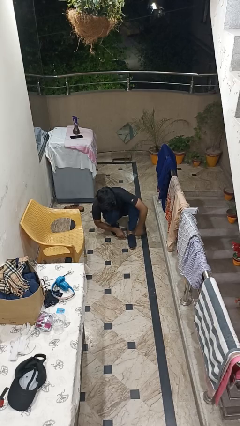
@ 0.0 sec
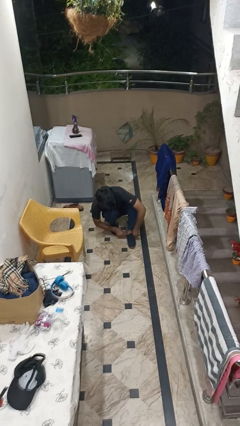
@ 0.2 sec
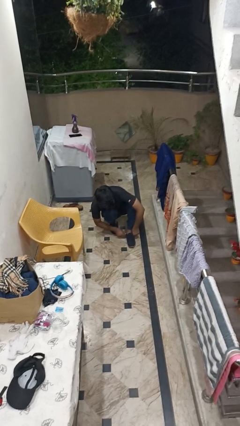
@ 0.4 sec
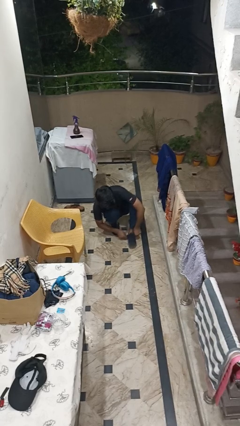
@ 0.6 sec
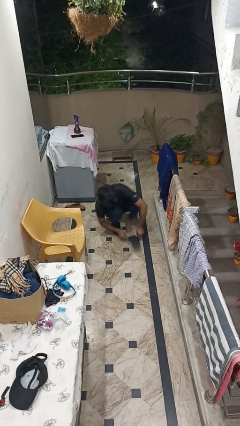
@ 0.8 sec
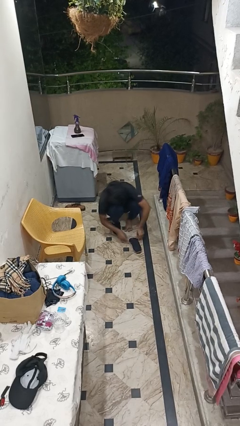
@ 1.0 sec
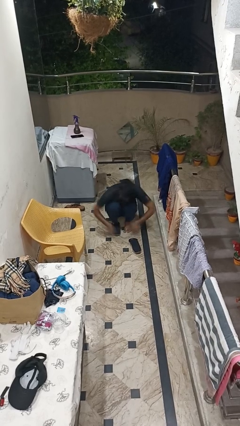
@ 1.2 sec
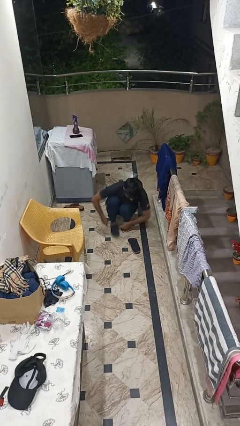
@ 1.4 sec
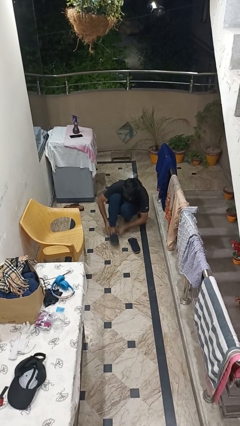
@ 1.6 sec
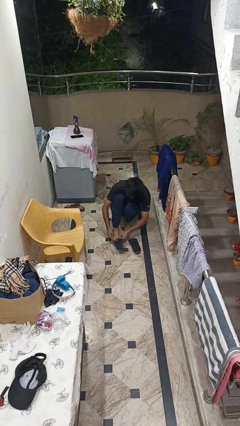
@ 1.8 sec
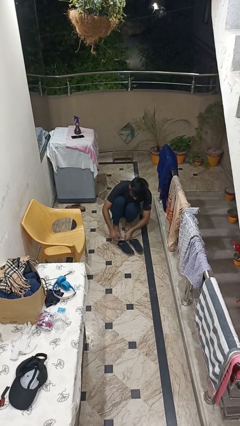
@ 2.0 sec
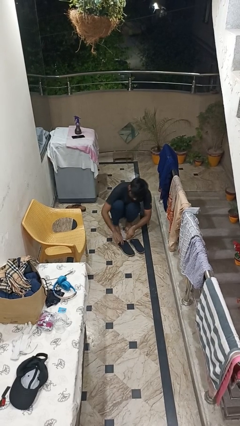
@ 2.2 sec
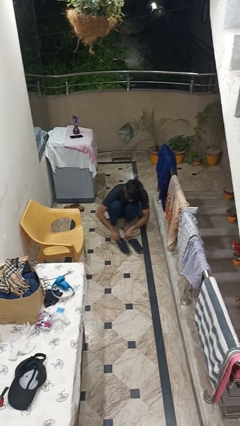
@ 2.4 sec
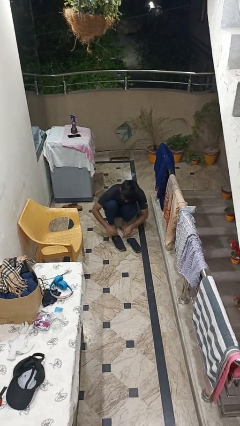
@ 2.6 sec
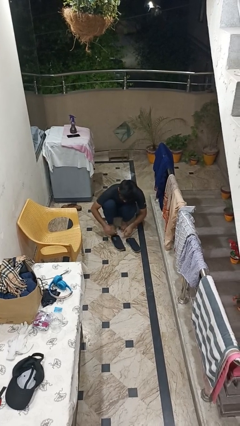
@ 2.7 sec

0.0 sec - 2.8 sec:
person takes off shoes

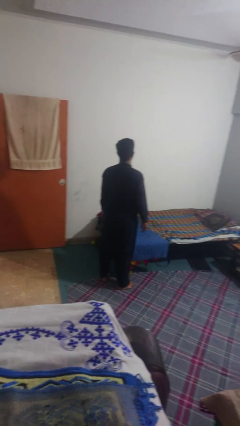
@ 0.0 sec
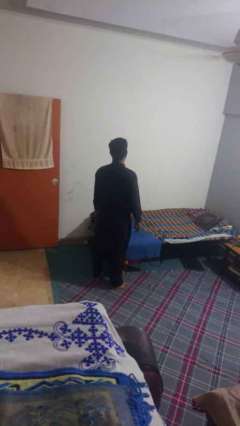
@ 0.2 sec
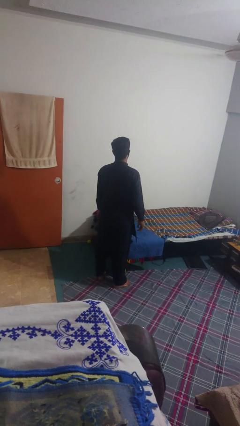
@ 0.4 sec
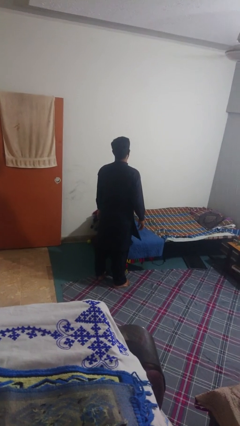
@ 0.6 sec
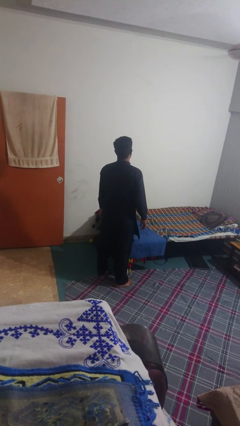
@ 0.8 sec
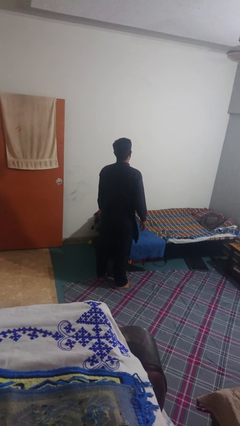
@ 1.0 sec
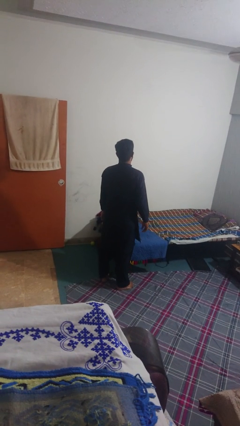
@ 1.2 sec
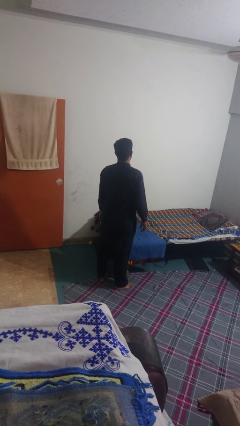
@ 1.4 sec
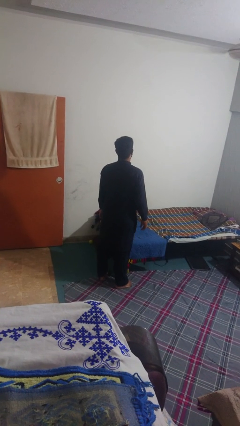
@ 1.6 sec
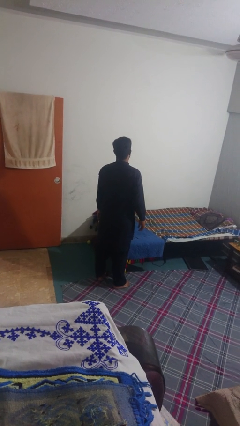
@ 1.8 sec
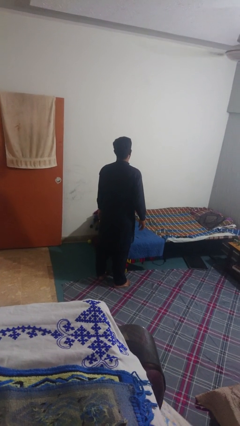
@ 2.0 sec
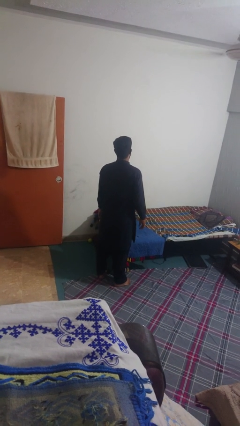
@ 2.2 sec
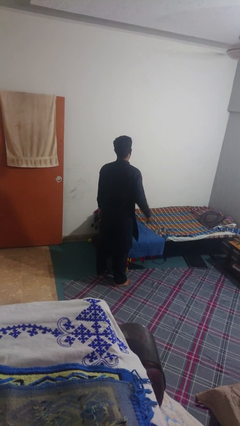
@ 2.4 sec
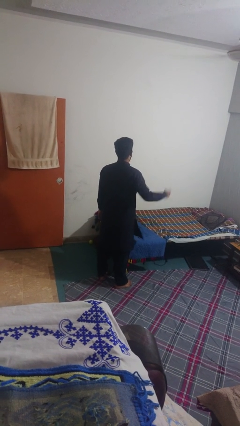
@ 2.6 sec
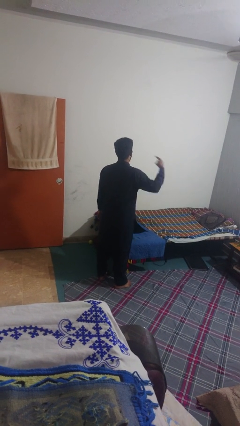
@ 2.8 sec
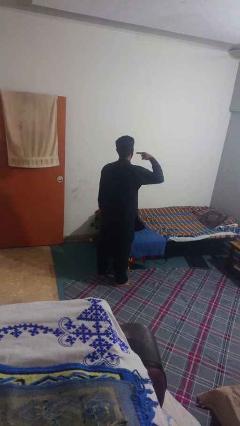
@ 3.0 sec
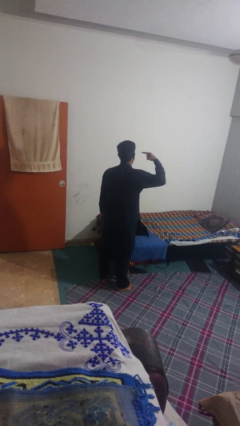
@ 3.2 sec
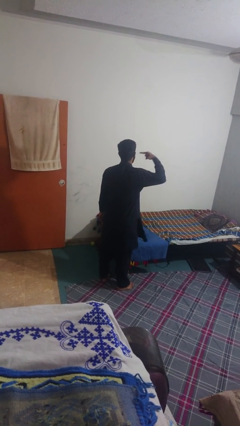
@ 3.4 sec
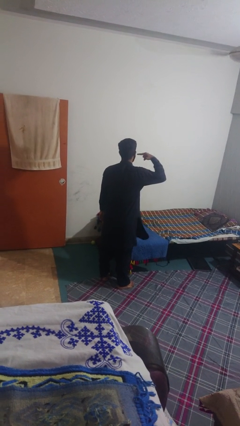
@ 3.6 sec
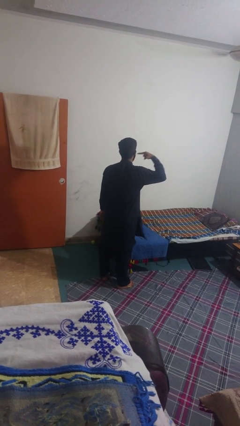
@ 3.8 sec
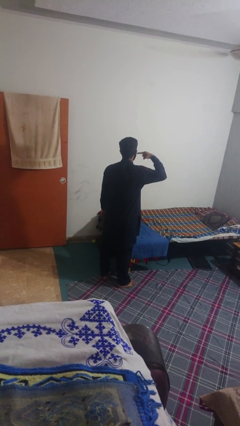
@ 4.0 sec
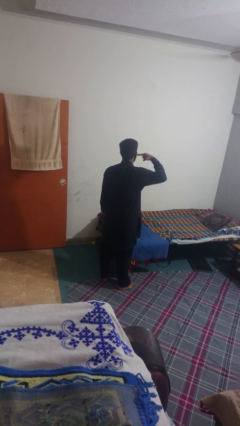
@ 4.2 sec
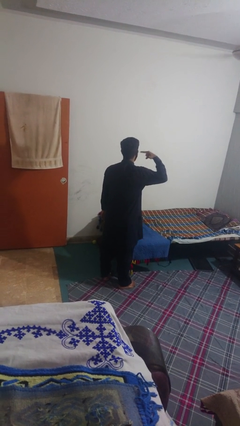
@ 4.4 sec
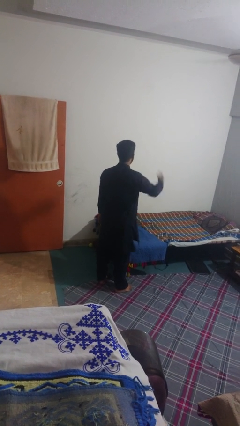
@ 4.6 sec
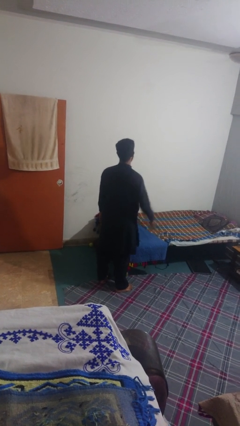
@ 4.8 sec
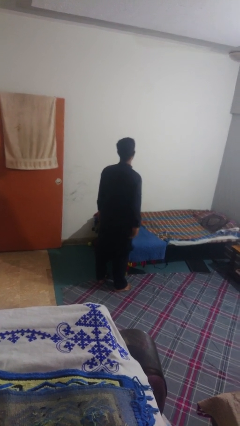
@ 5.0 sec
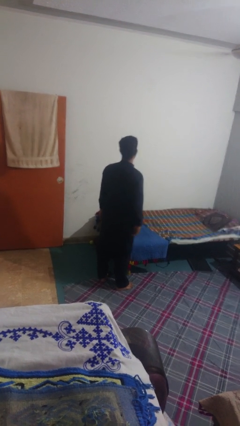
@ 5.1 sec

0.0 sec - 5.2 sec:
person gestures listen closely

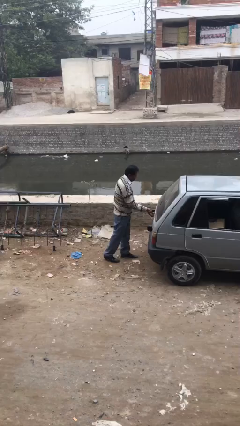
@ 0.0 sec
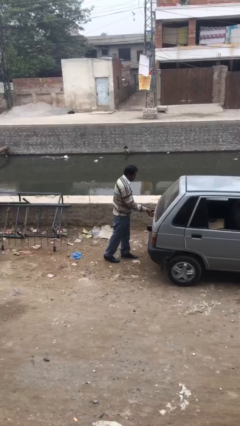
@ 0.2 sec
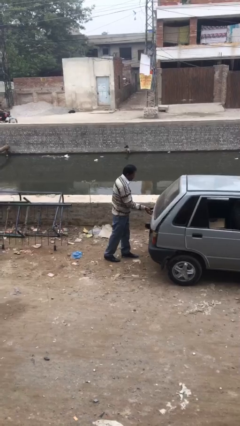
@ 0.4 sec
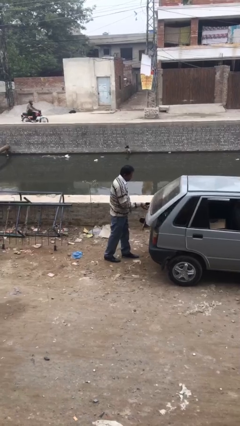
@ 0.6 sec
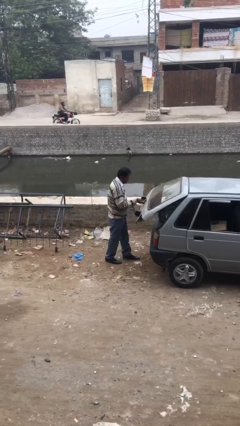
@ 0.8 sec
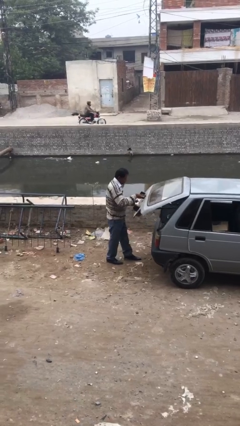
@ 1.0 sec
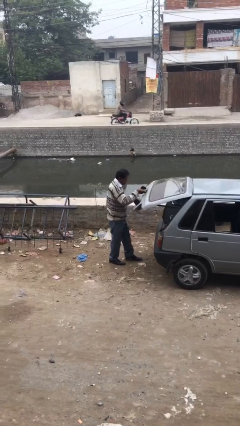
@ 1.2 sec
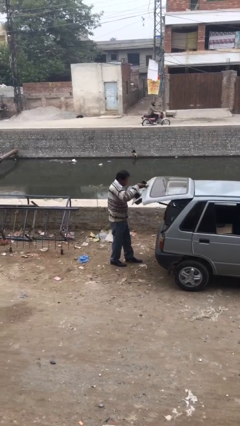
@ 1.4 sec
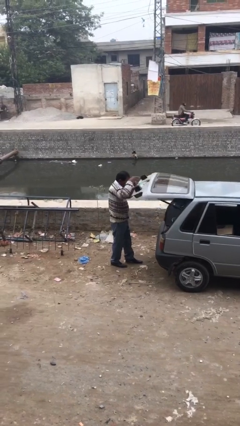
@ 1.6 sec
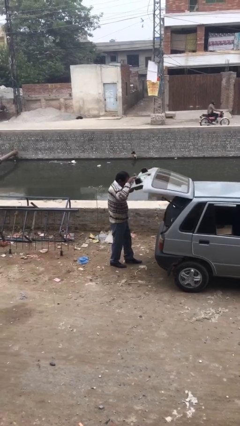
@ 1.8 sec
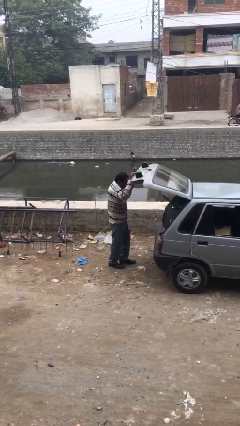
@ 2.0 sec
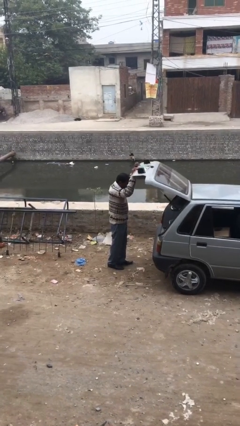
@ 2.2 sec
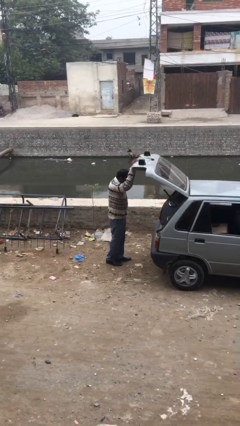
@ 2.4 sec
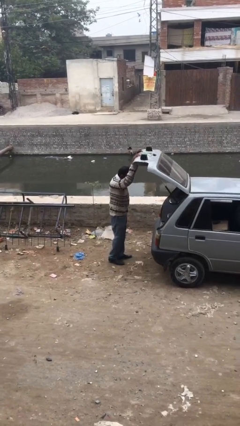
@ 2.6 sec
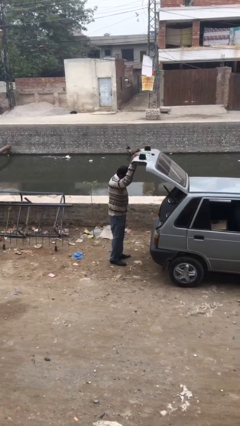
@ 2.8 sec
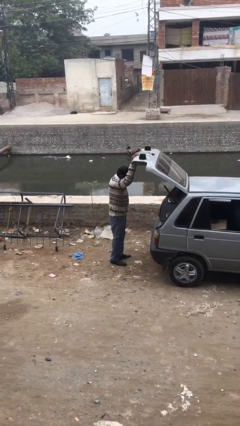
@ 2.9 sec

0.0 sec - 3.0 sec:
person opens car trunk

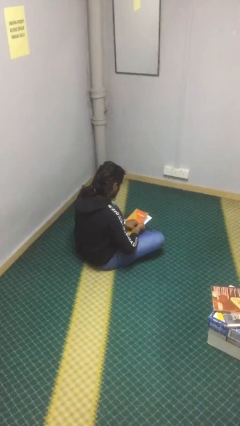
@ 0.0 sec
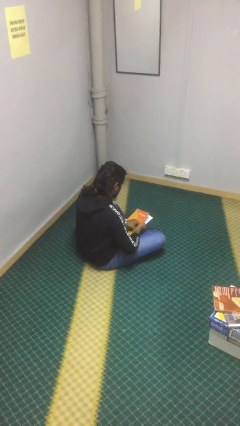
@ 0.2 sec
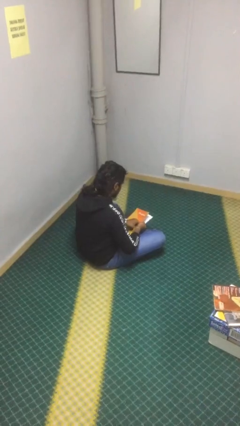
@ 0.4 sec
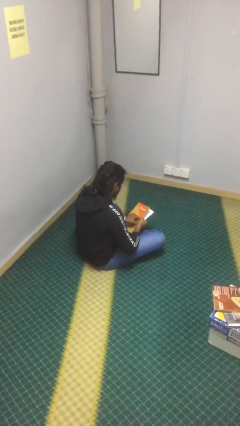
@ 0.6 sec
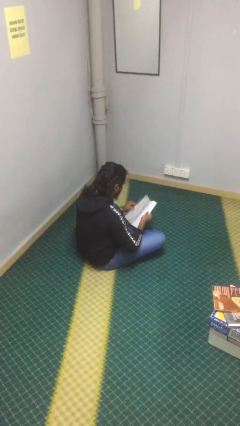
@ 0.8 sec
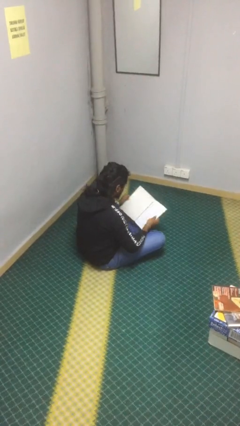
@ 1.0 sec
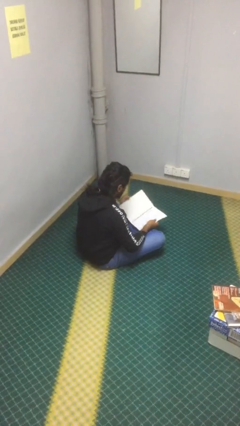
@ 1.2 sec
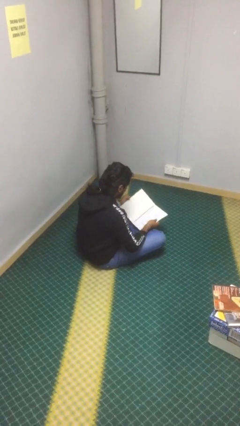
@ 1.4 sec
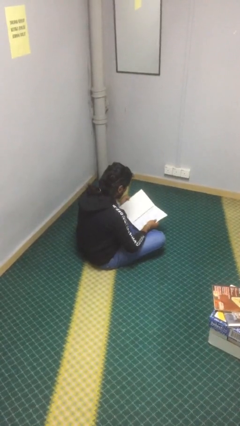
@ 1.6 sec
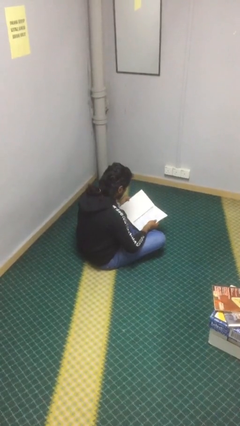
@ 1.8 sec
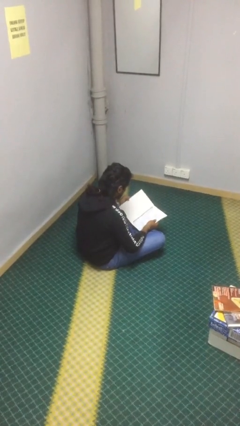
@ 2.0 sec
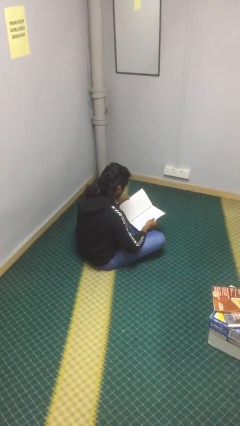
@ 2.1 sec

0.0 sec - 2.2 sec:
person reads book

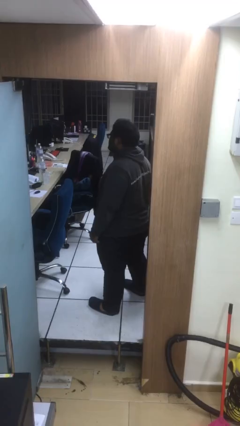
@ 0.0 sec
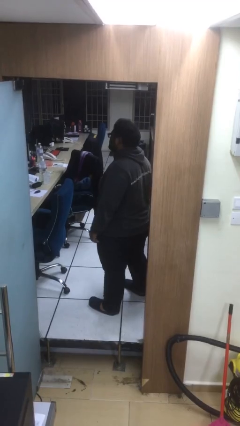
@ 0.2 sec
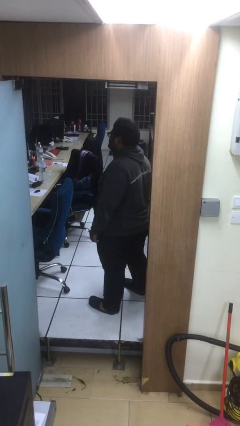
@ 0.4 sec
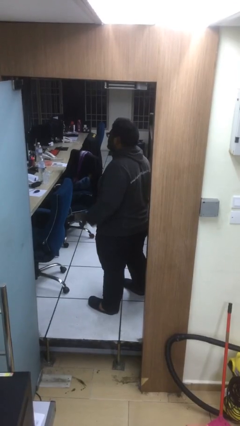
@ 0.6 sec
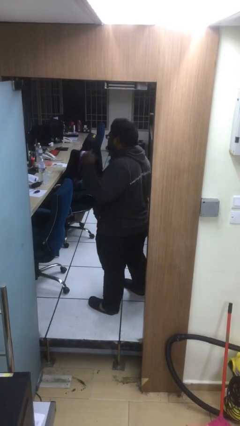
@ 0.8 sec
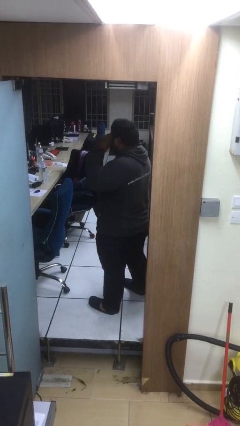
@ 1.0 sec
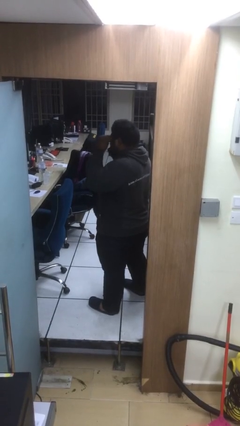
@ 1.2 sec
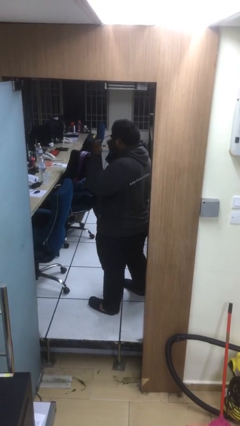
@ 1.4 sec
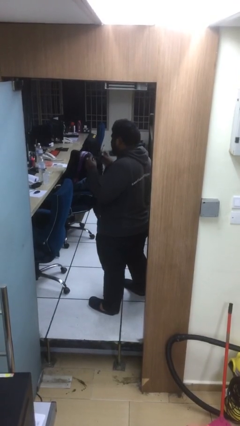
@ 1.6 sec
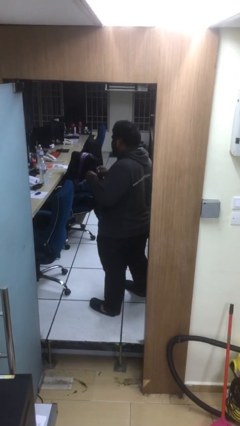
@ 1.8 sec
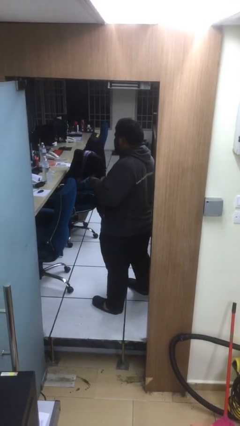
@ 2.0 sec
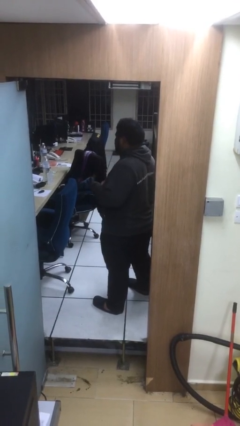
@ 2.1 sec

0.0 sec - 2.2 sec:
person takes off glasses

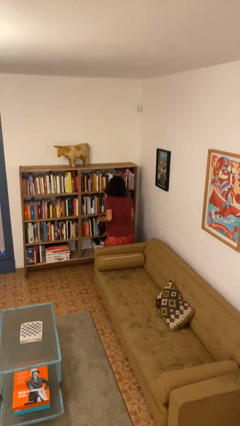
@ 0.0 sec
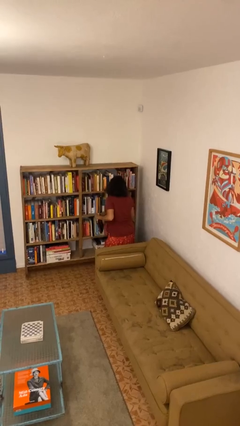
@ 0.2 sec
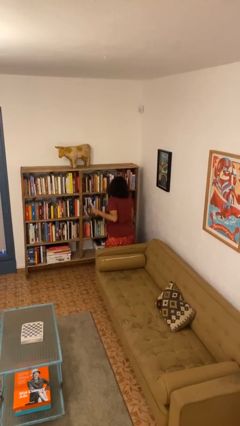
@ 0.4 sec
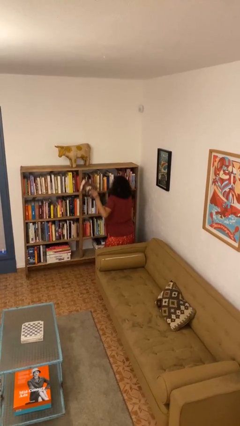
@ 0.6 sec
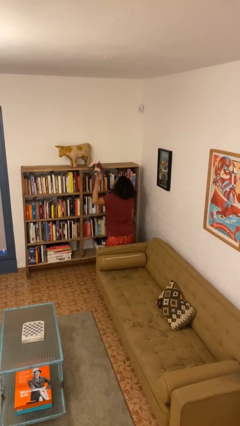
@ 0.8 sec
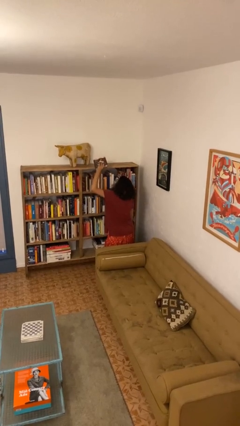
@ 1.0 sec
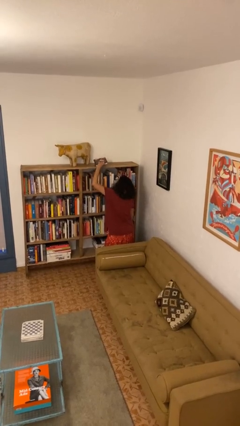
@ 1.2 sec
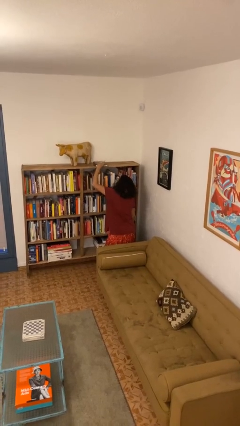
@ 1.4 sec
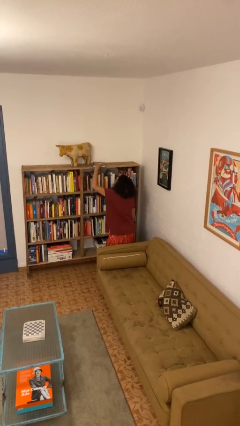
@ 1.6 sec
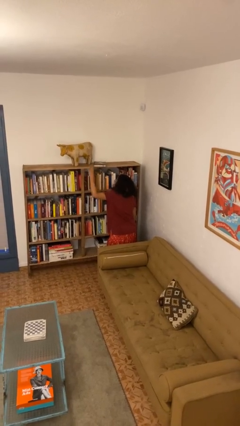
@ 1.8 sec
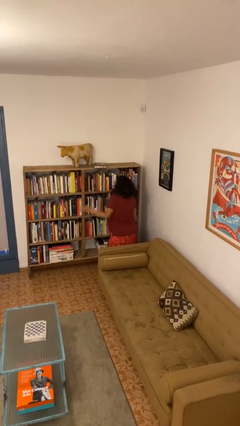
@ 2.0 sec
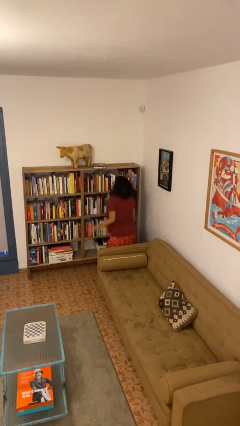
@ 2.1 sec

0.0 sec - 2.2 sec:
person puts down object on shelf
